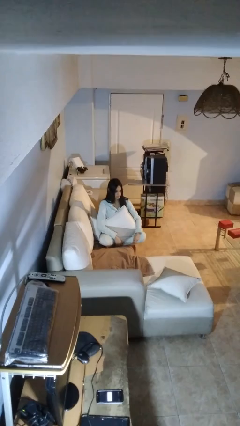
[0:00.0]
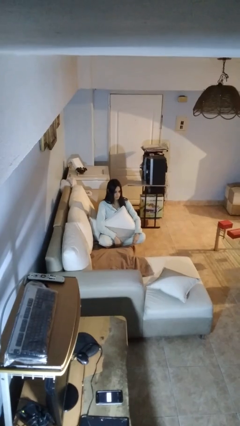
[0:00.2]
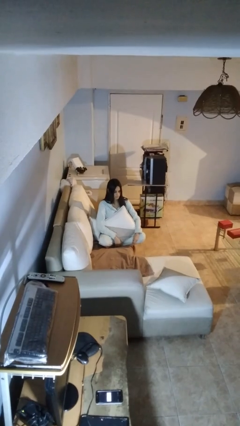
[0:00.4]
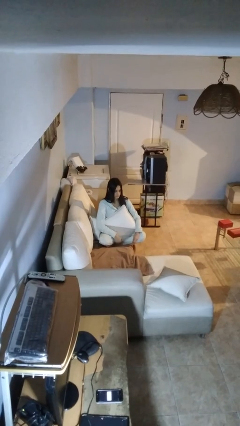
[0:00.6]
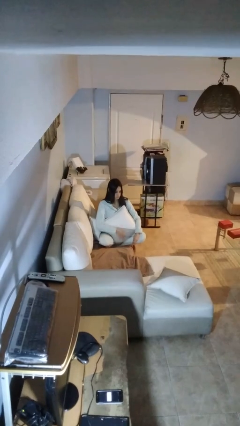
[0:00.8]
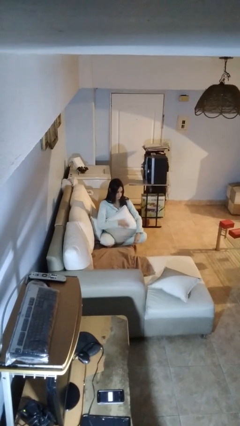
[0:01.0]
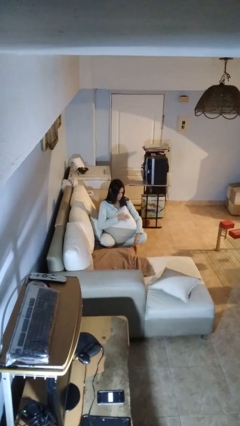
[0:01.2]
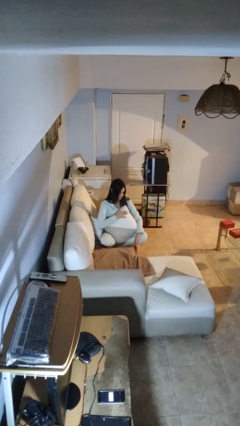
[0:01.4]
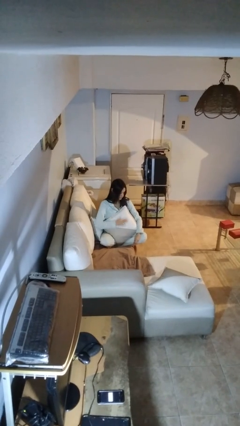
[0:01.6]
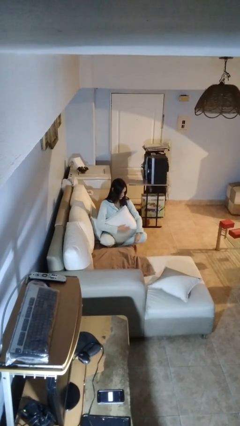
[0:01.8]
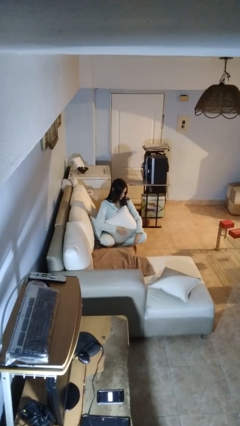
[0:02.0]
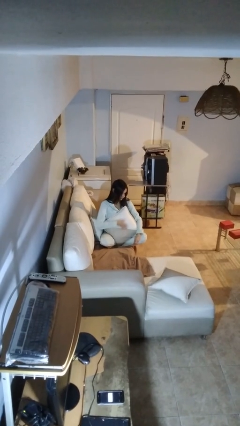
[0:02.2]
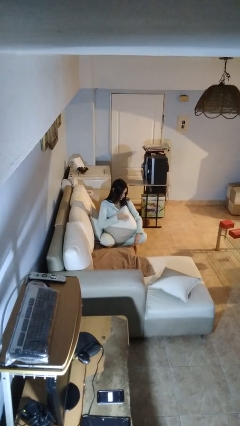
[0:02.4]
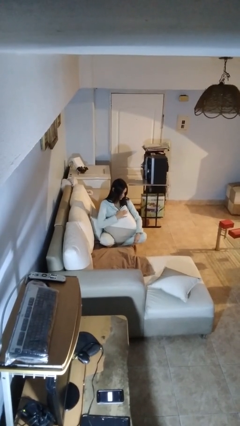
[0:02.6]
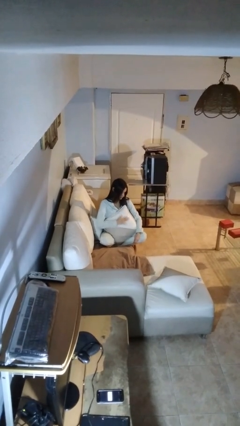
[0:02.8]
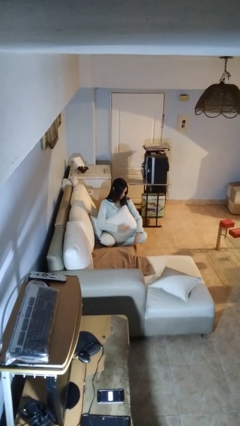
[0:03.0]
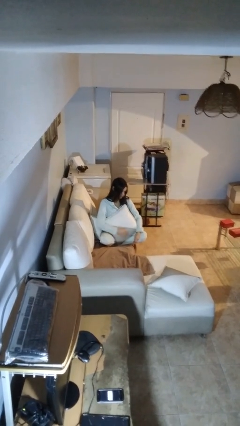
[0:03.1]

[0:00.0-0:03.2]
person waves hand over object

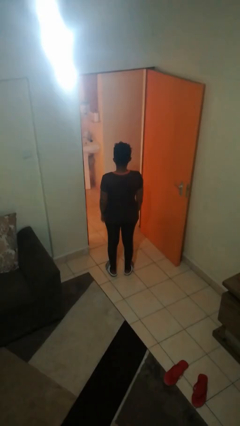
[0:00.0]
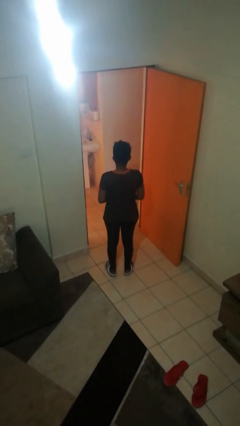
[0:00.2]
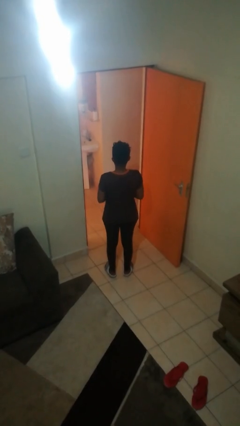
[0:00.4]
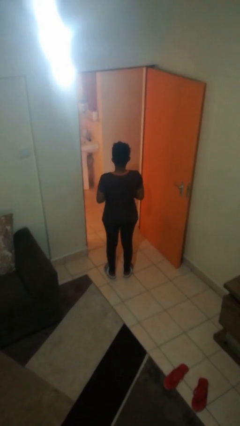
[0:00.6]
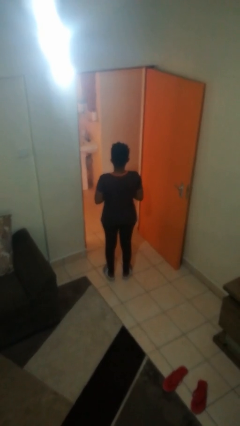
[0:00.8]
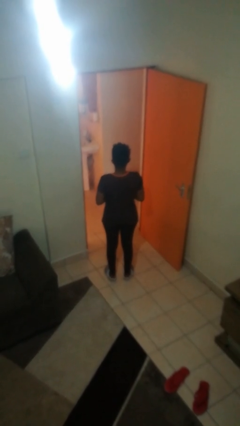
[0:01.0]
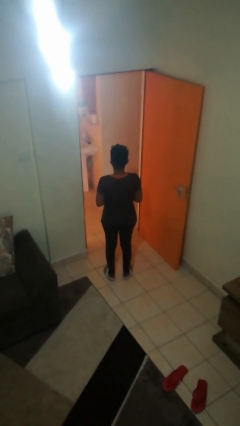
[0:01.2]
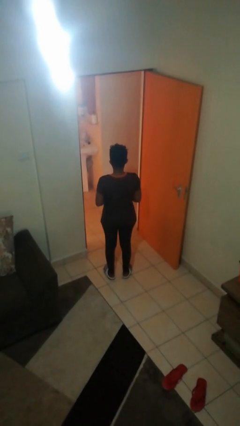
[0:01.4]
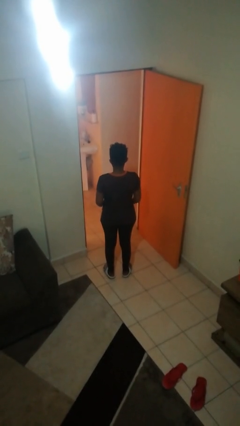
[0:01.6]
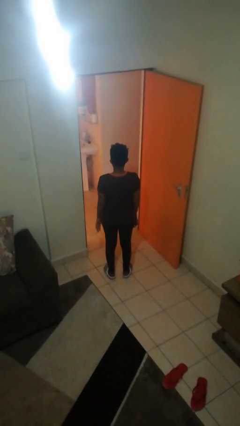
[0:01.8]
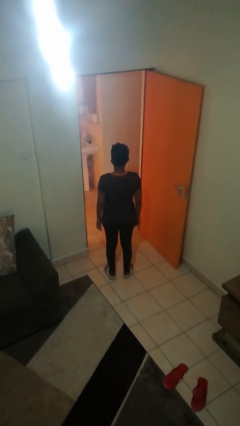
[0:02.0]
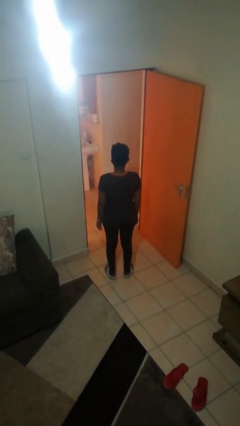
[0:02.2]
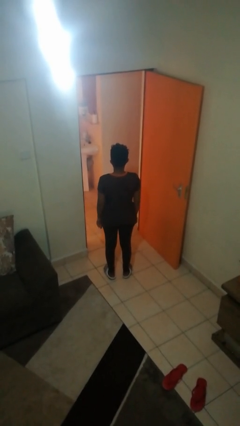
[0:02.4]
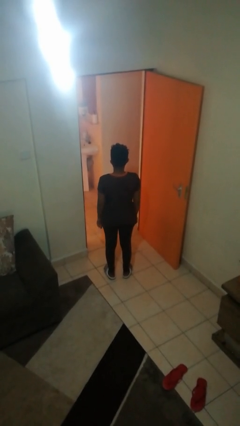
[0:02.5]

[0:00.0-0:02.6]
person puts on ring

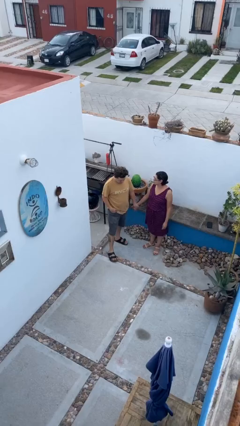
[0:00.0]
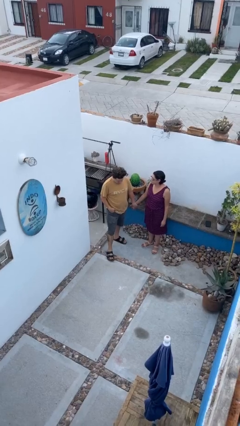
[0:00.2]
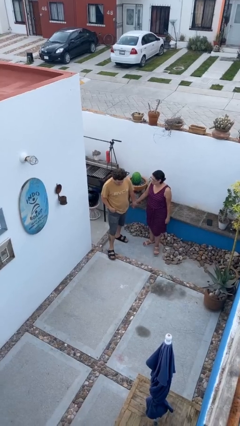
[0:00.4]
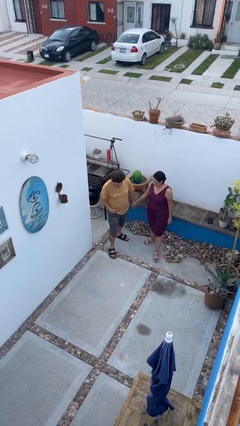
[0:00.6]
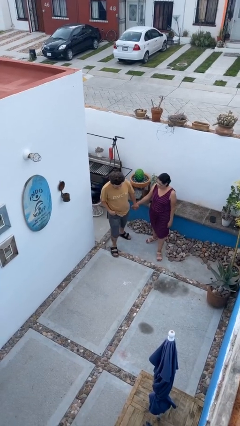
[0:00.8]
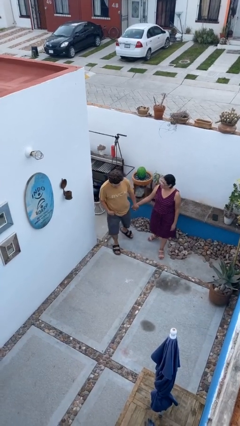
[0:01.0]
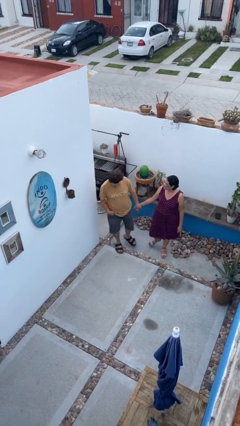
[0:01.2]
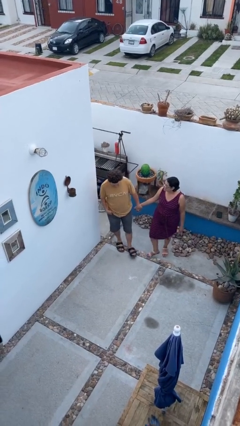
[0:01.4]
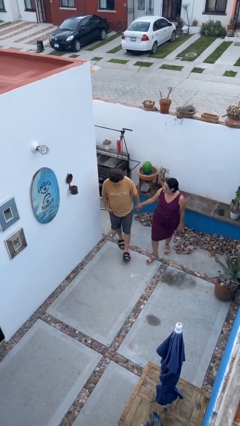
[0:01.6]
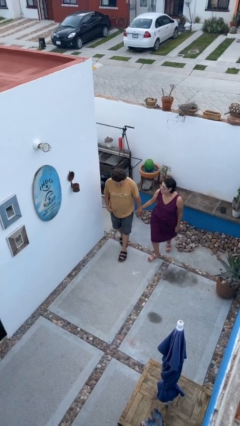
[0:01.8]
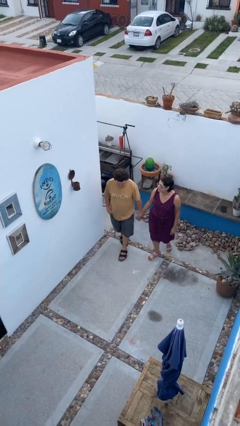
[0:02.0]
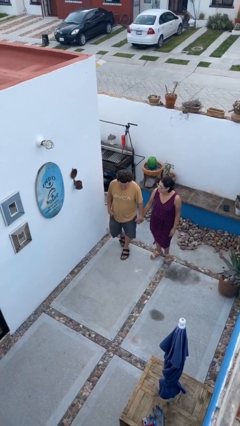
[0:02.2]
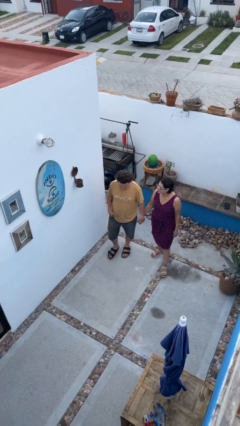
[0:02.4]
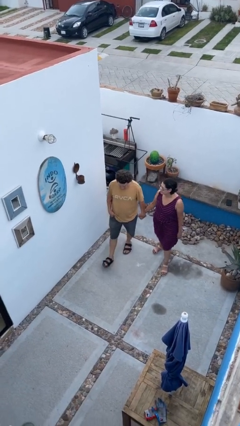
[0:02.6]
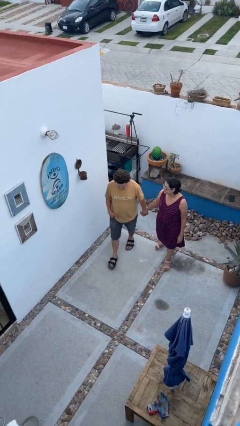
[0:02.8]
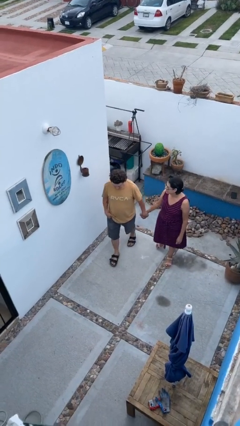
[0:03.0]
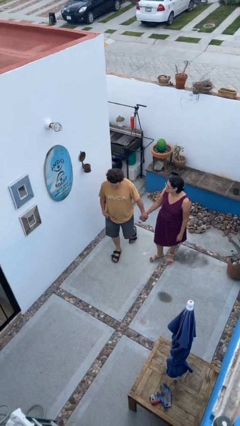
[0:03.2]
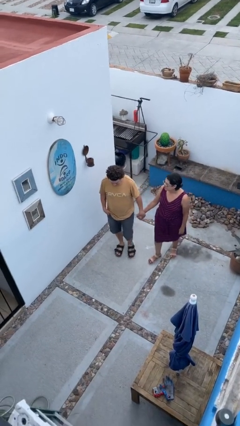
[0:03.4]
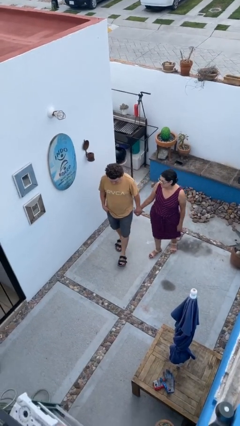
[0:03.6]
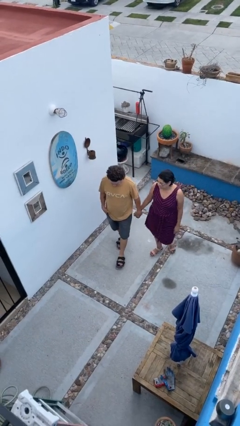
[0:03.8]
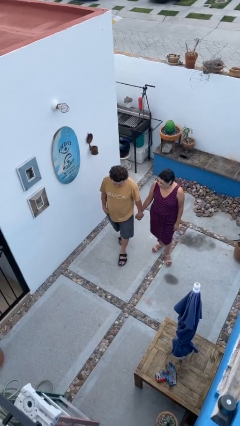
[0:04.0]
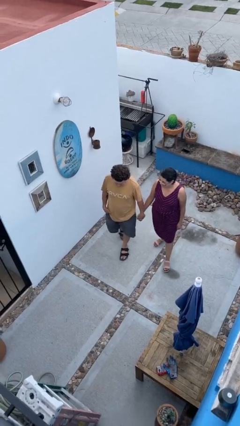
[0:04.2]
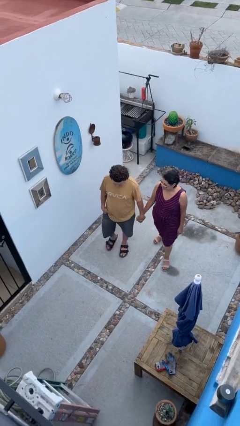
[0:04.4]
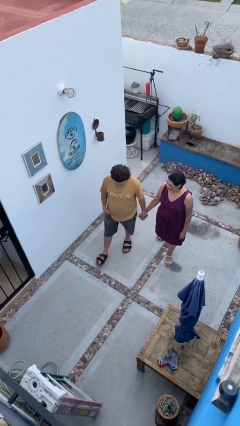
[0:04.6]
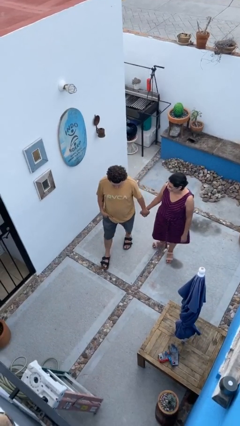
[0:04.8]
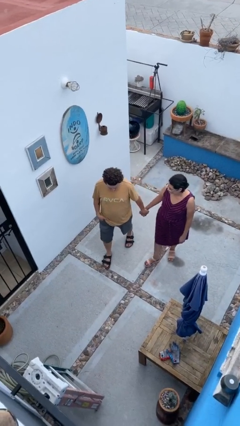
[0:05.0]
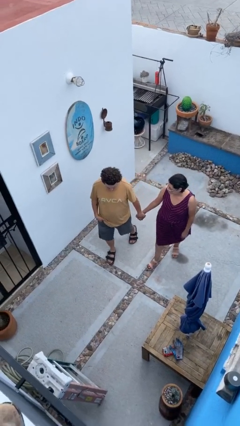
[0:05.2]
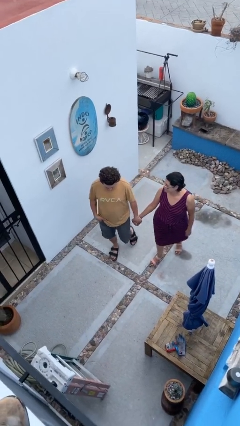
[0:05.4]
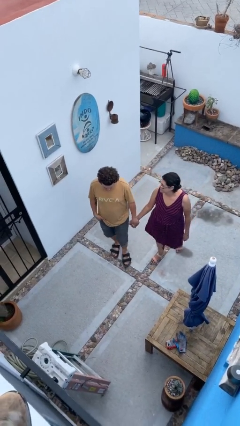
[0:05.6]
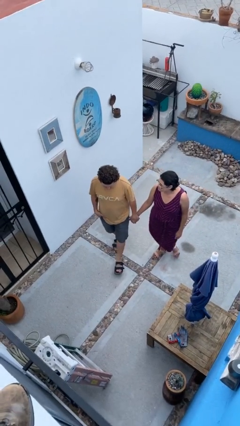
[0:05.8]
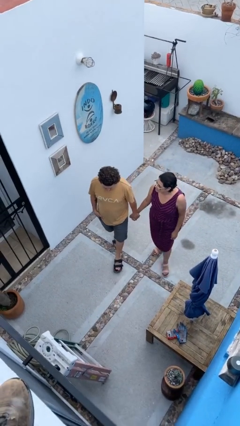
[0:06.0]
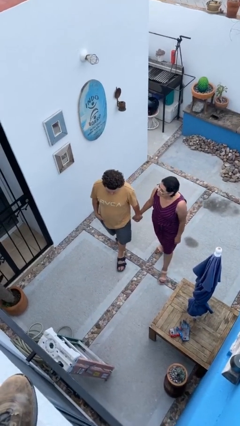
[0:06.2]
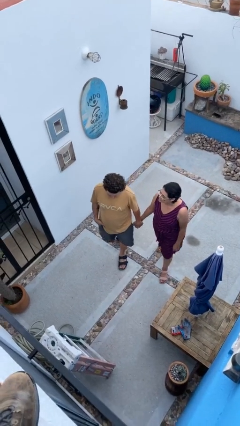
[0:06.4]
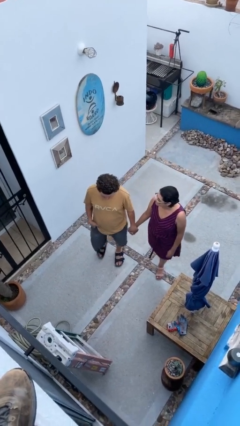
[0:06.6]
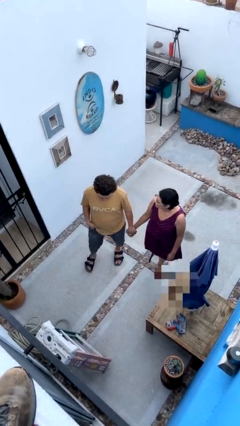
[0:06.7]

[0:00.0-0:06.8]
person holds hand

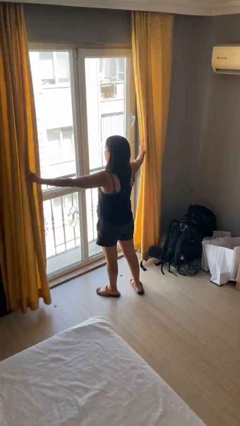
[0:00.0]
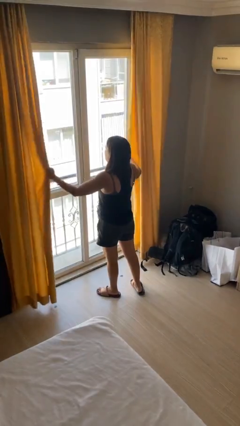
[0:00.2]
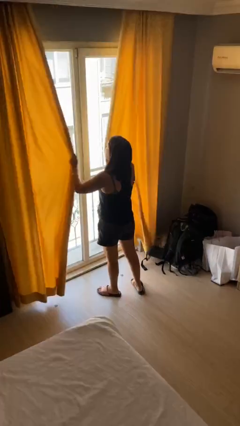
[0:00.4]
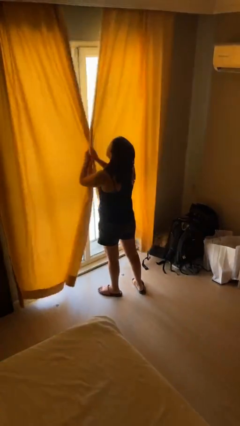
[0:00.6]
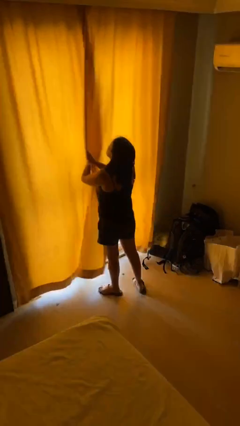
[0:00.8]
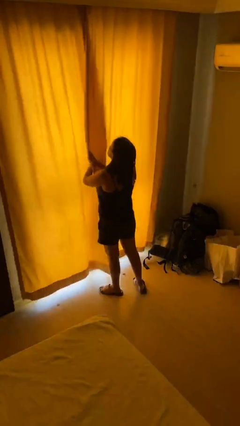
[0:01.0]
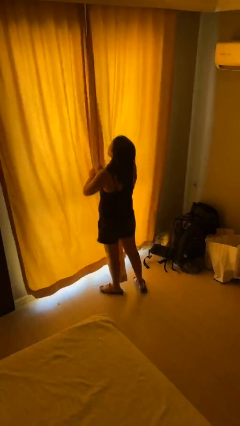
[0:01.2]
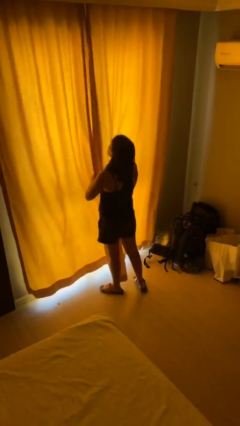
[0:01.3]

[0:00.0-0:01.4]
person closes curtains

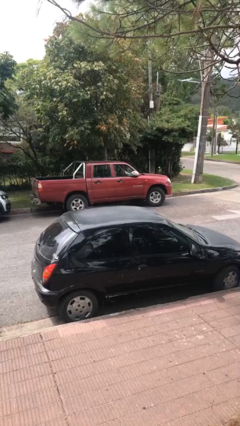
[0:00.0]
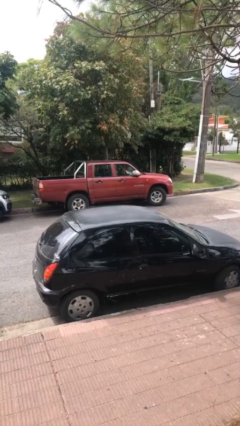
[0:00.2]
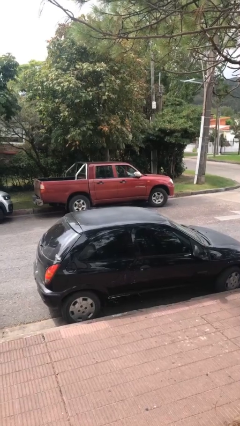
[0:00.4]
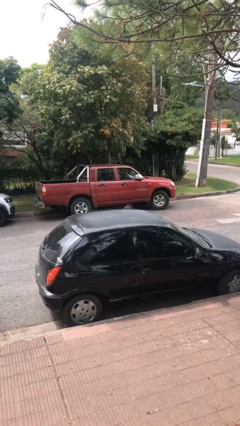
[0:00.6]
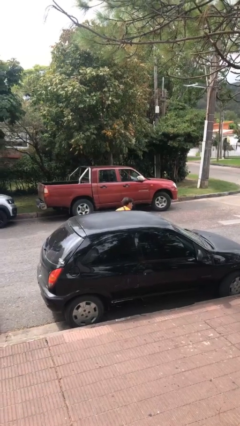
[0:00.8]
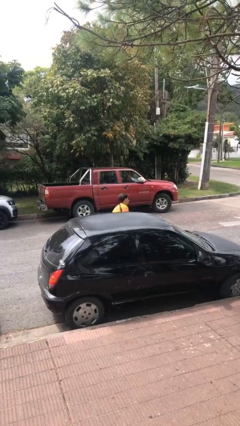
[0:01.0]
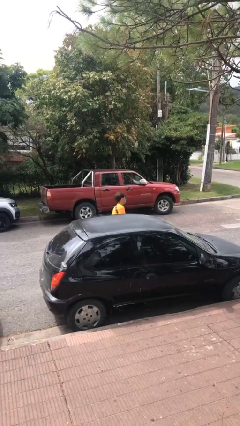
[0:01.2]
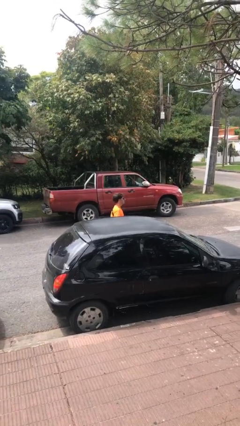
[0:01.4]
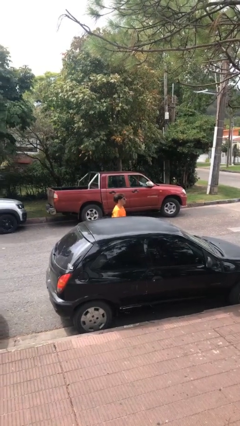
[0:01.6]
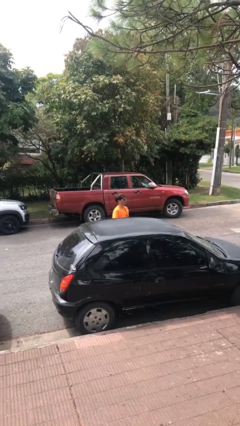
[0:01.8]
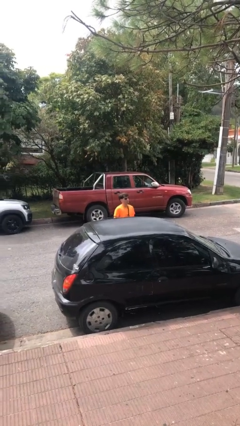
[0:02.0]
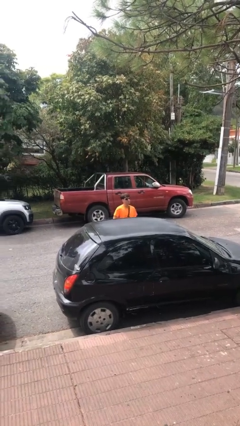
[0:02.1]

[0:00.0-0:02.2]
person exits car

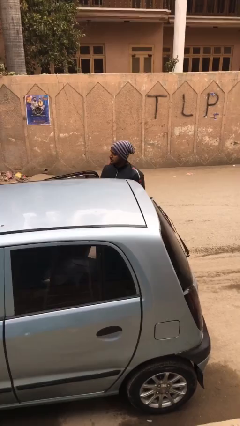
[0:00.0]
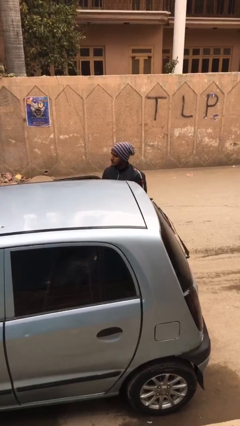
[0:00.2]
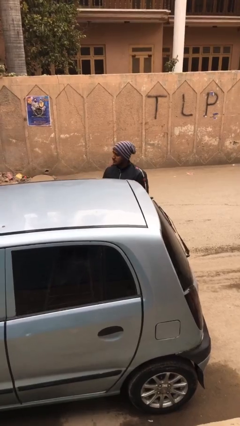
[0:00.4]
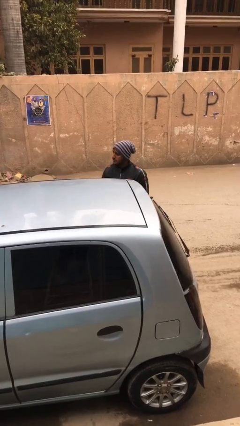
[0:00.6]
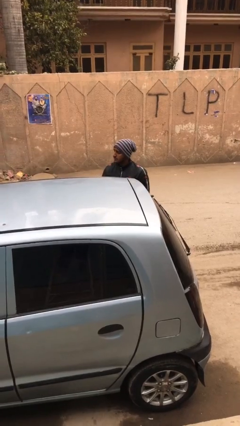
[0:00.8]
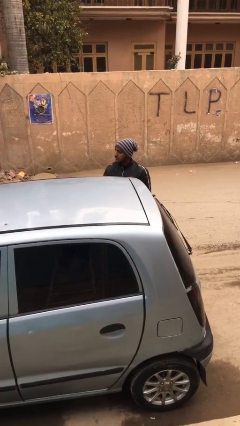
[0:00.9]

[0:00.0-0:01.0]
person closes car door
